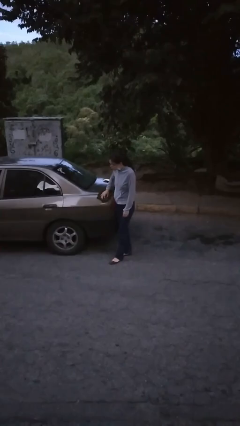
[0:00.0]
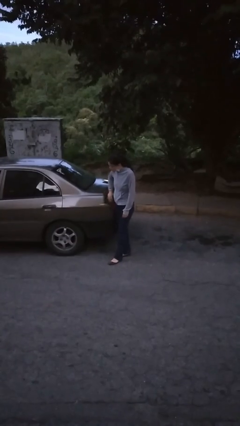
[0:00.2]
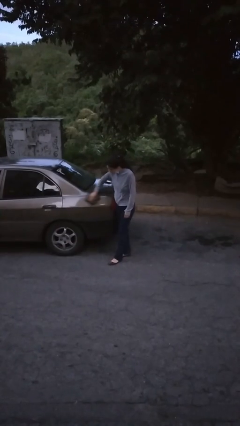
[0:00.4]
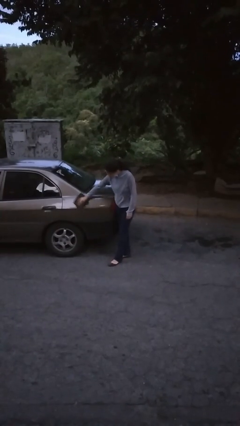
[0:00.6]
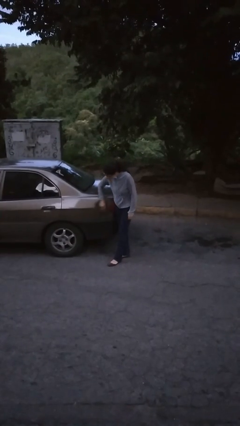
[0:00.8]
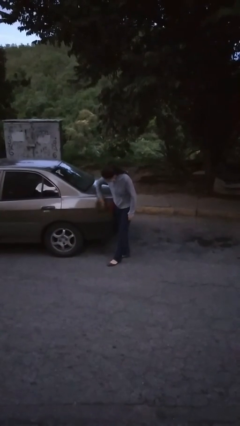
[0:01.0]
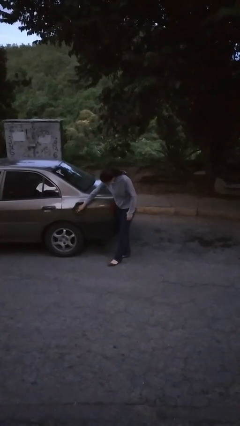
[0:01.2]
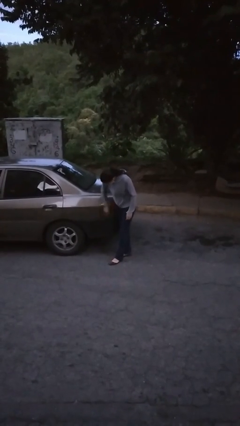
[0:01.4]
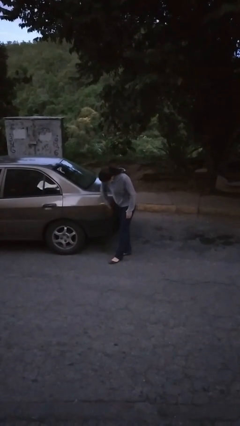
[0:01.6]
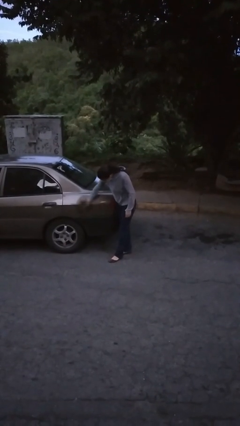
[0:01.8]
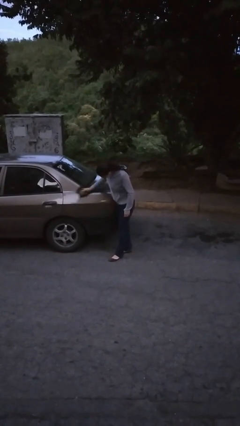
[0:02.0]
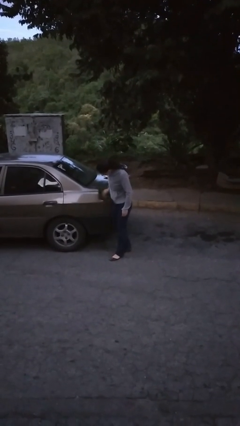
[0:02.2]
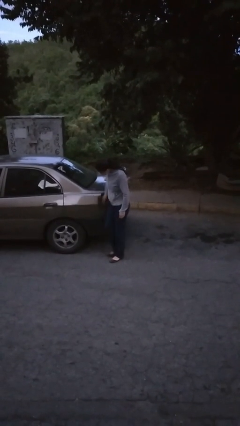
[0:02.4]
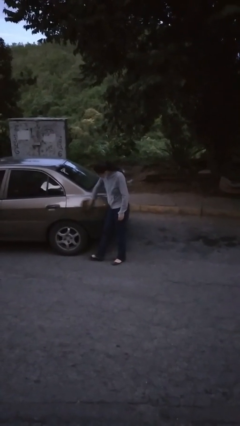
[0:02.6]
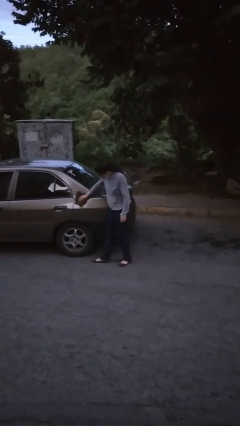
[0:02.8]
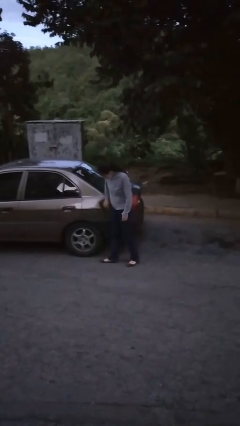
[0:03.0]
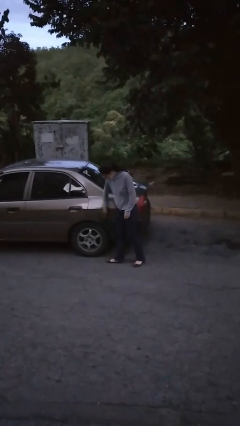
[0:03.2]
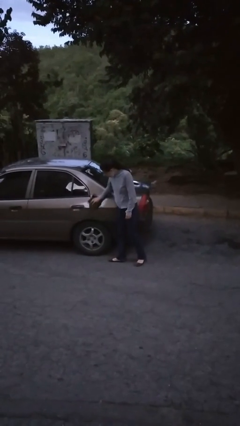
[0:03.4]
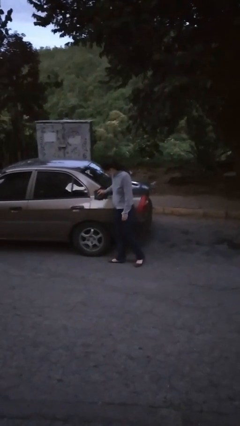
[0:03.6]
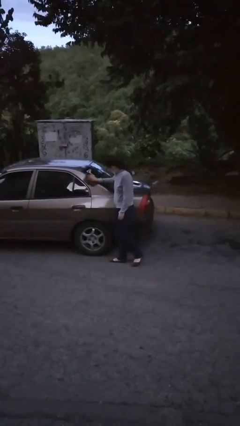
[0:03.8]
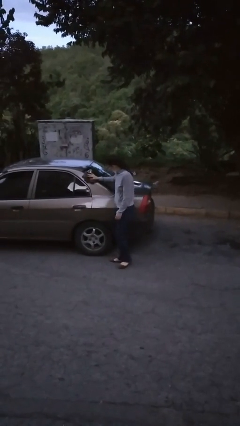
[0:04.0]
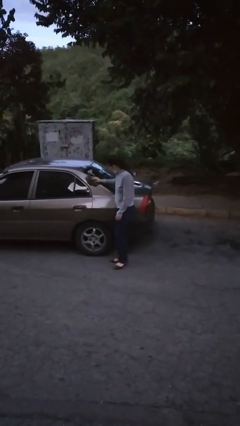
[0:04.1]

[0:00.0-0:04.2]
person polishes car with rag

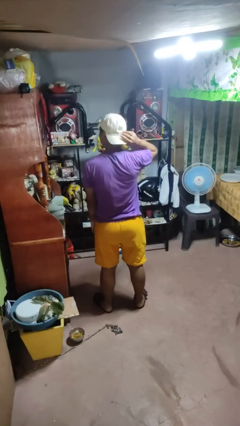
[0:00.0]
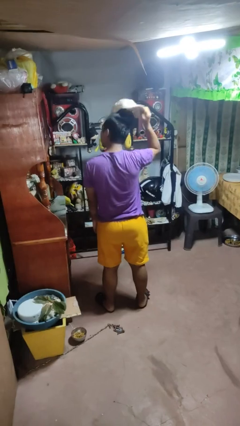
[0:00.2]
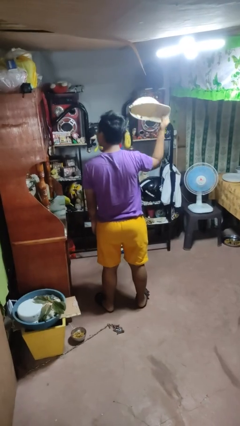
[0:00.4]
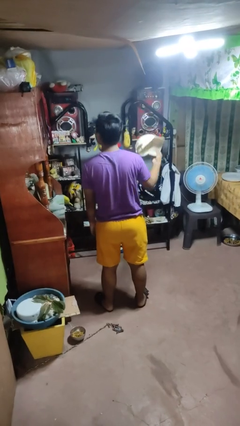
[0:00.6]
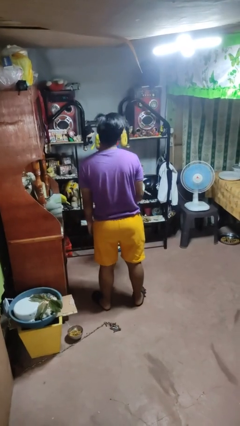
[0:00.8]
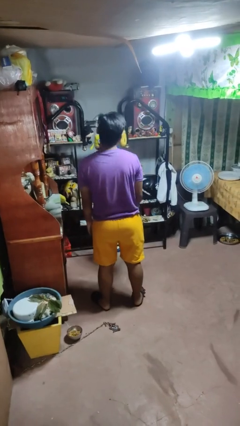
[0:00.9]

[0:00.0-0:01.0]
person takes off hat

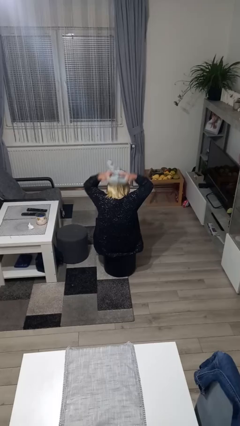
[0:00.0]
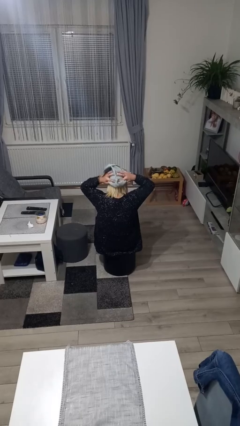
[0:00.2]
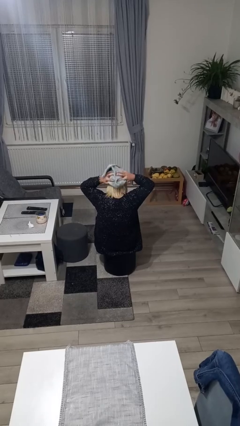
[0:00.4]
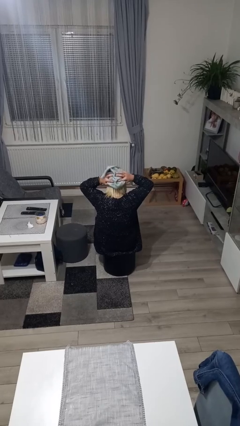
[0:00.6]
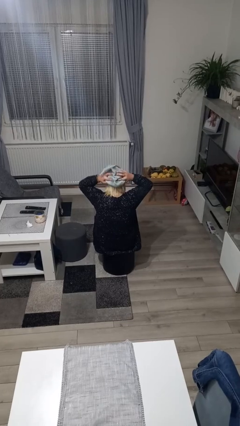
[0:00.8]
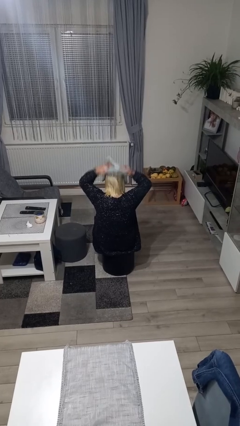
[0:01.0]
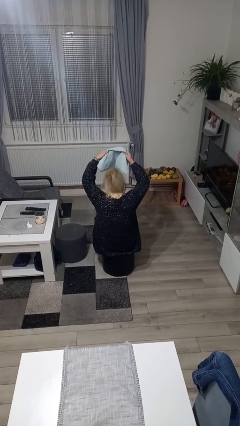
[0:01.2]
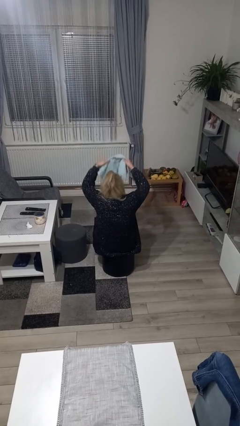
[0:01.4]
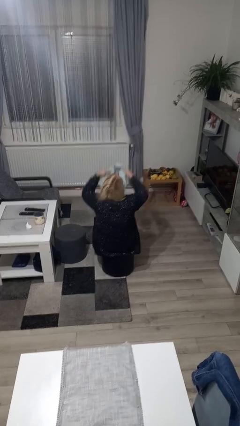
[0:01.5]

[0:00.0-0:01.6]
person dries hair with towel

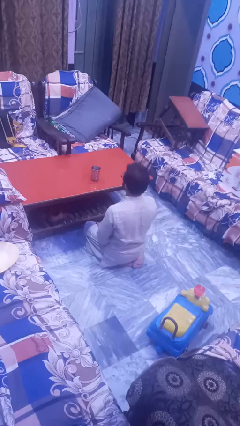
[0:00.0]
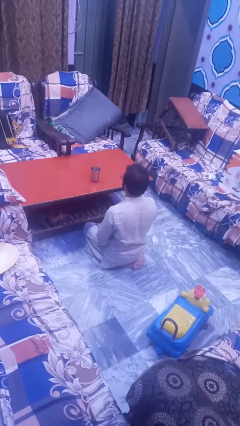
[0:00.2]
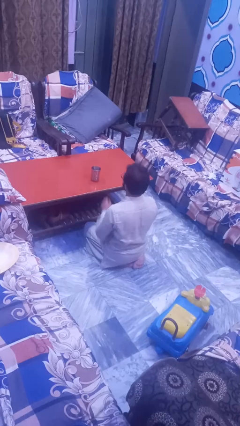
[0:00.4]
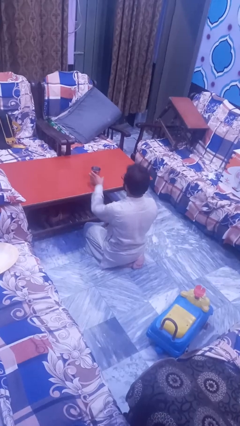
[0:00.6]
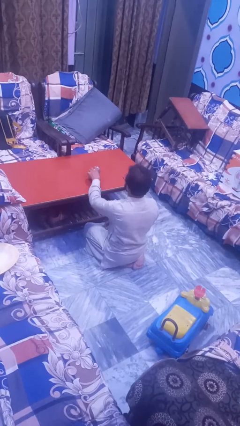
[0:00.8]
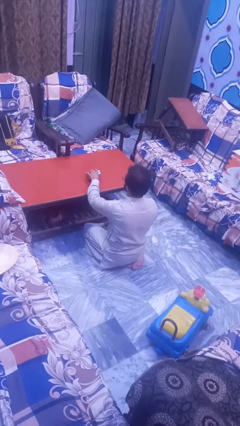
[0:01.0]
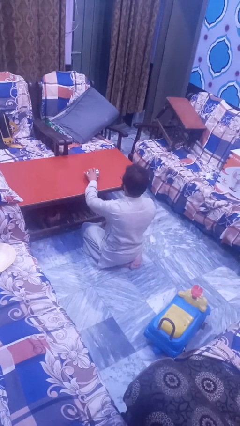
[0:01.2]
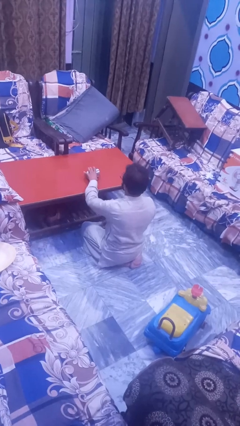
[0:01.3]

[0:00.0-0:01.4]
person knocks over glass

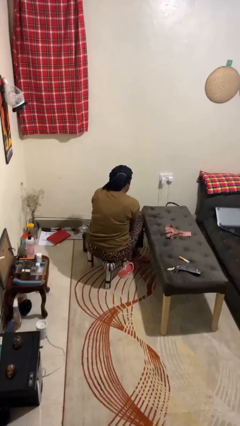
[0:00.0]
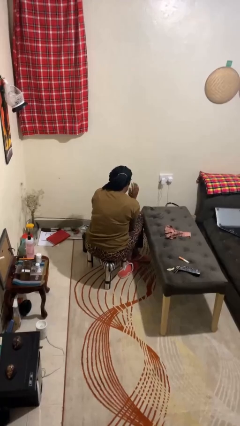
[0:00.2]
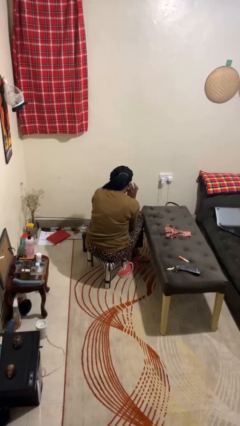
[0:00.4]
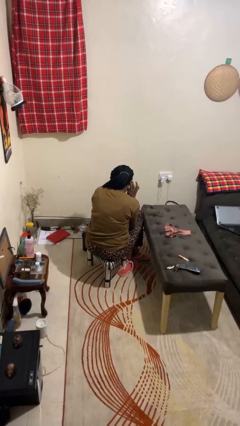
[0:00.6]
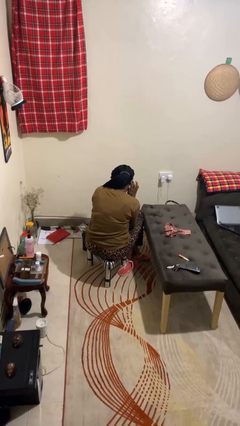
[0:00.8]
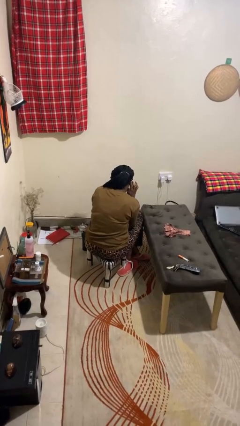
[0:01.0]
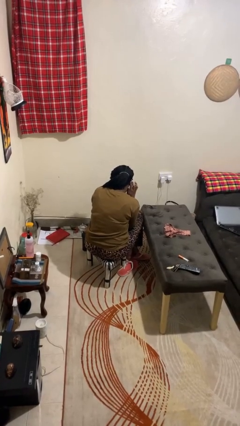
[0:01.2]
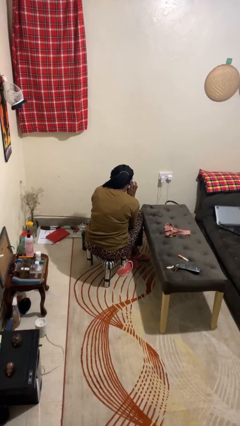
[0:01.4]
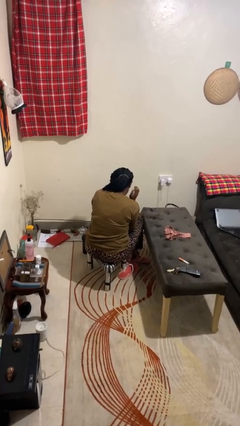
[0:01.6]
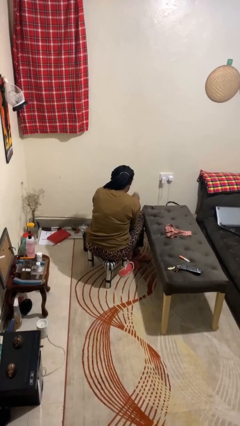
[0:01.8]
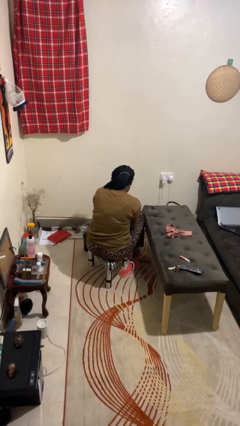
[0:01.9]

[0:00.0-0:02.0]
person gestures listen closely

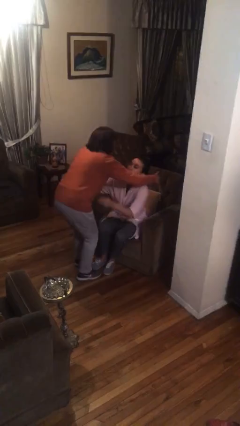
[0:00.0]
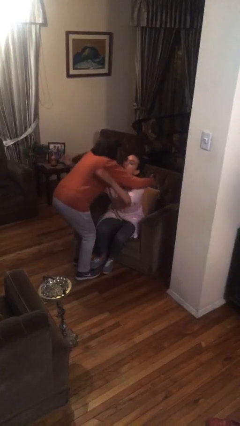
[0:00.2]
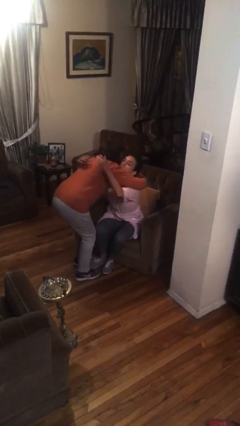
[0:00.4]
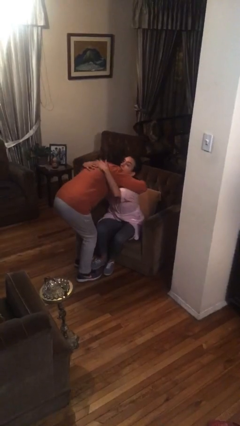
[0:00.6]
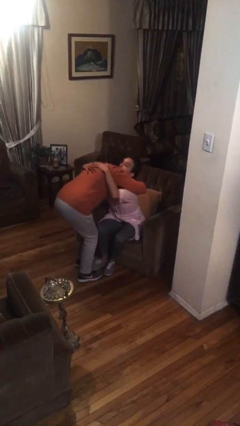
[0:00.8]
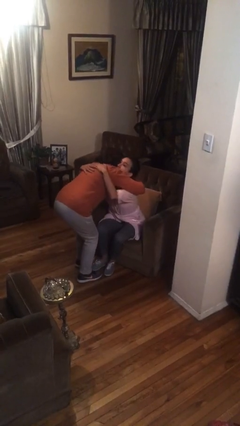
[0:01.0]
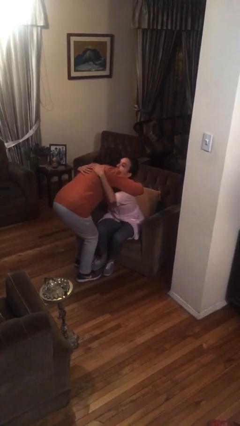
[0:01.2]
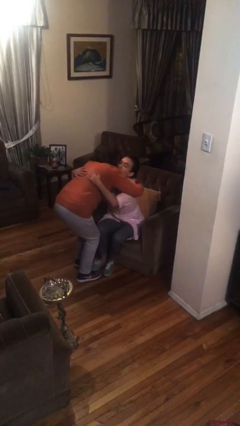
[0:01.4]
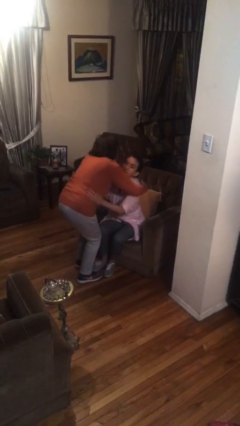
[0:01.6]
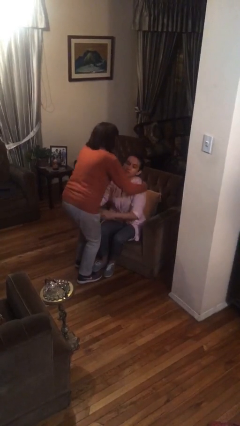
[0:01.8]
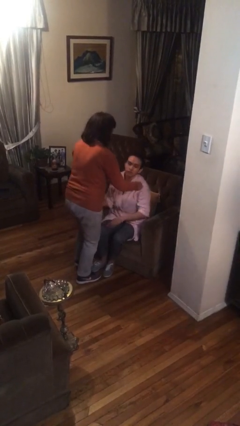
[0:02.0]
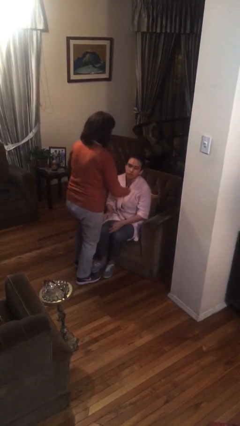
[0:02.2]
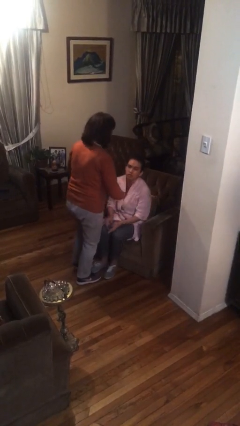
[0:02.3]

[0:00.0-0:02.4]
person embraces person

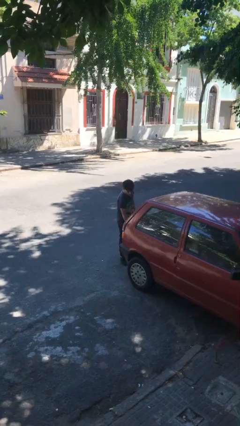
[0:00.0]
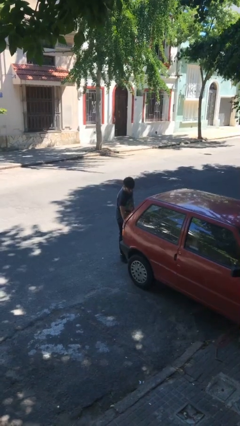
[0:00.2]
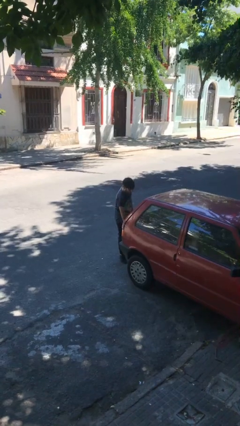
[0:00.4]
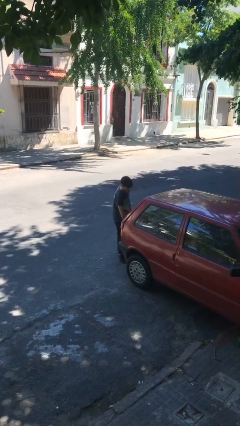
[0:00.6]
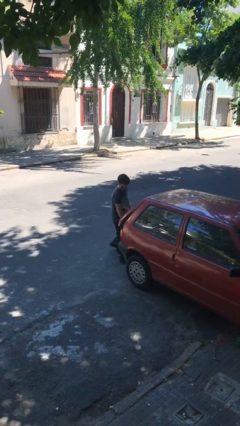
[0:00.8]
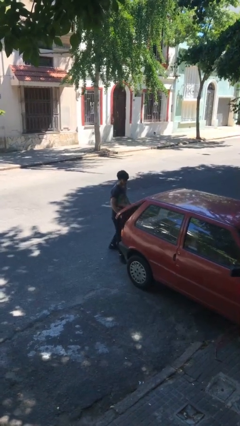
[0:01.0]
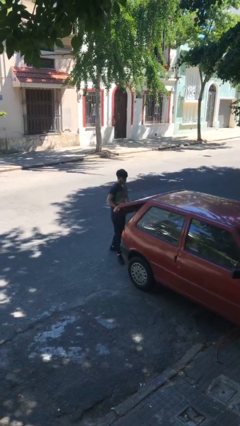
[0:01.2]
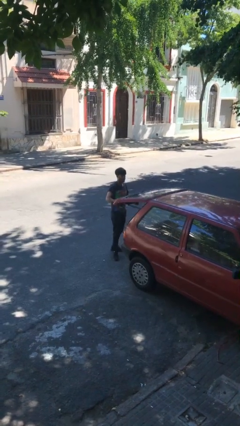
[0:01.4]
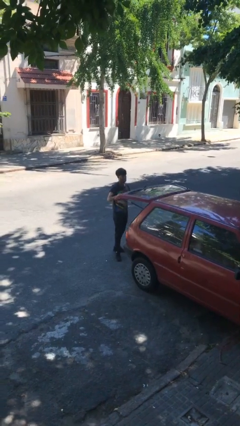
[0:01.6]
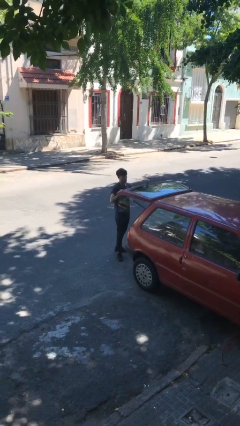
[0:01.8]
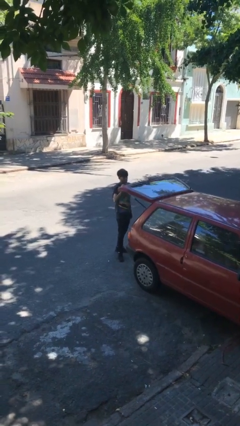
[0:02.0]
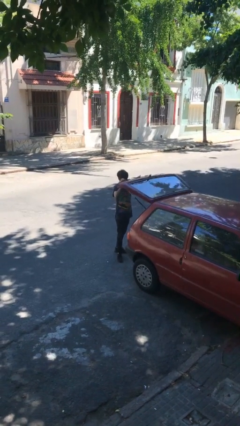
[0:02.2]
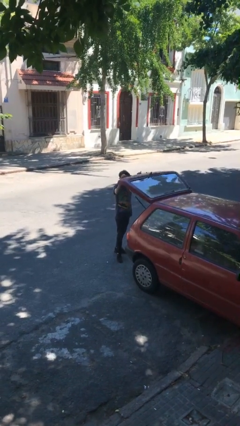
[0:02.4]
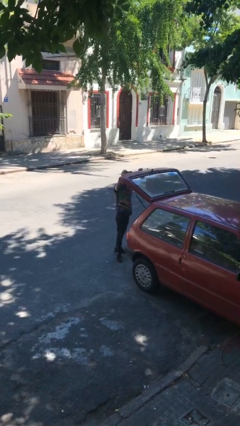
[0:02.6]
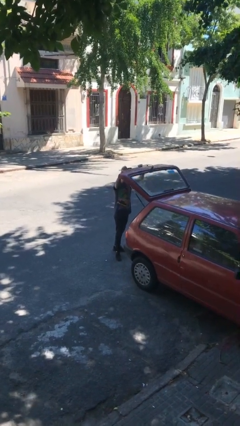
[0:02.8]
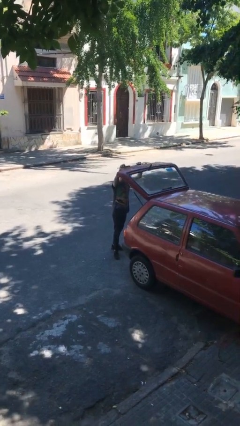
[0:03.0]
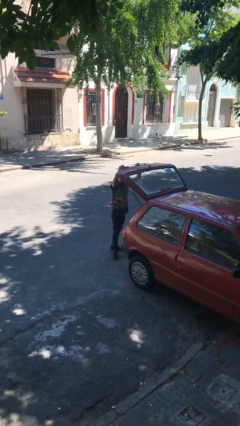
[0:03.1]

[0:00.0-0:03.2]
person opens car trunk

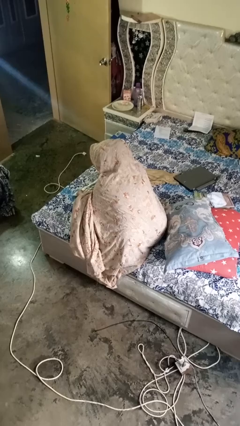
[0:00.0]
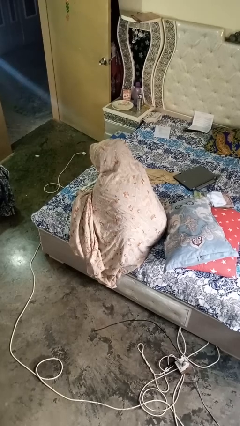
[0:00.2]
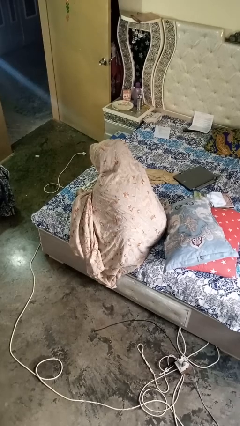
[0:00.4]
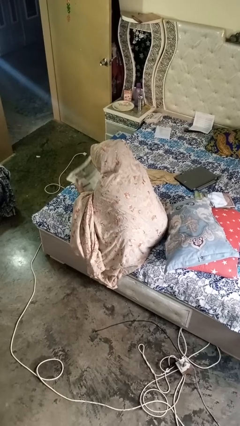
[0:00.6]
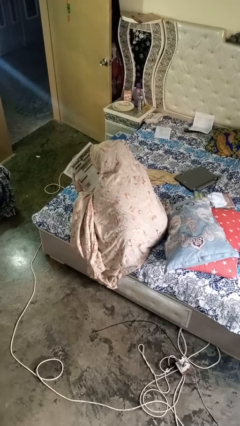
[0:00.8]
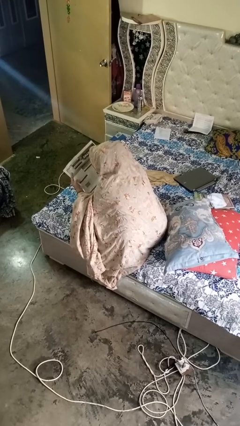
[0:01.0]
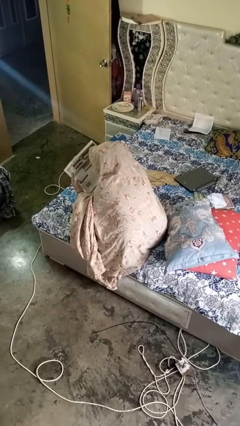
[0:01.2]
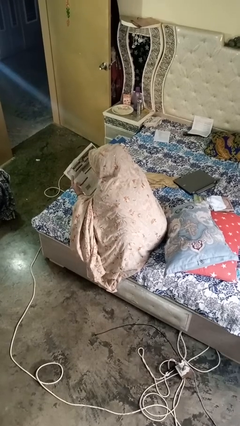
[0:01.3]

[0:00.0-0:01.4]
person reads newspaper
